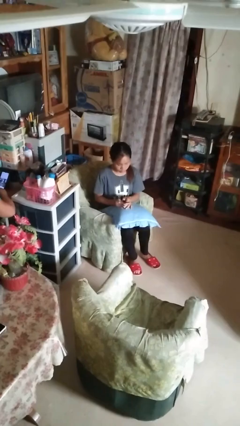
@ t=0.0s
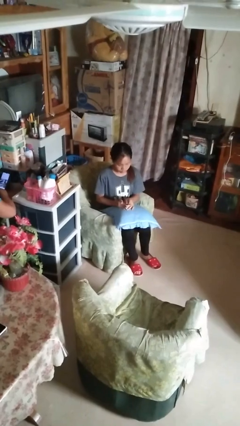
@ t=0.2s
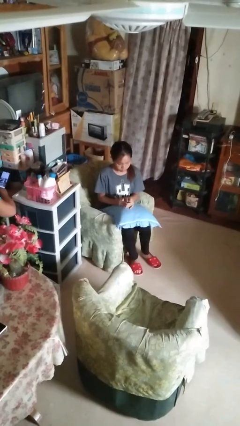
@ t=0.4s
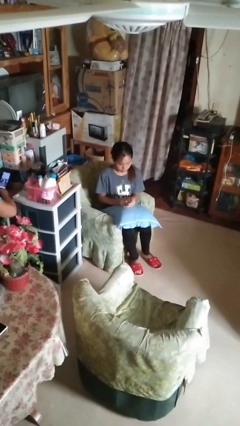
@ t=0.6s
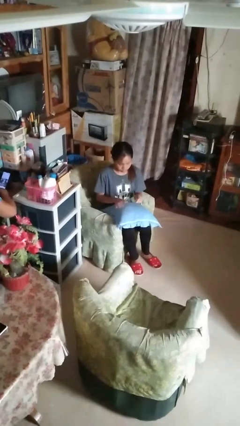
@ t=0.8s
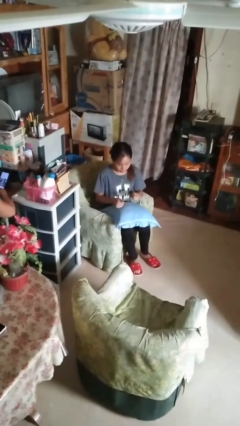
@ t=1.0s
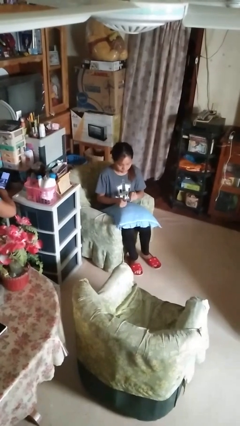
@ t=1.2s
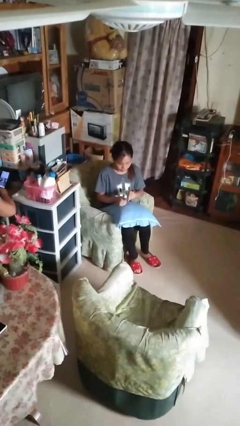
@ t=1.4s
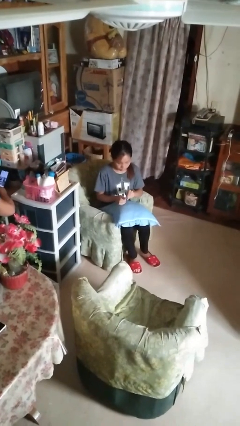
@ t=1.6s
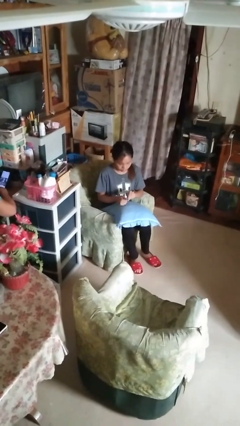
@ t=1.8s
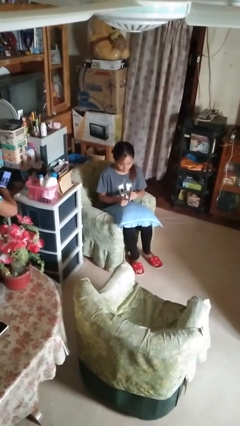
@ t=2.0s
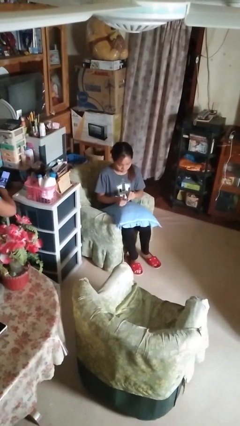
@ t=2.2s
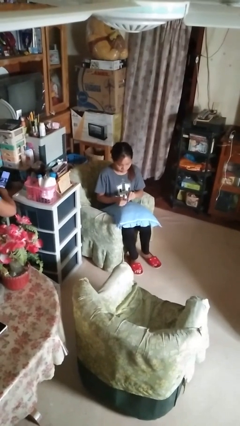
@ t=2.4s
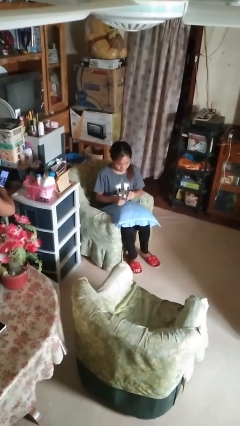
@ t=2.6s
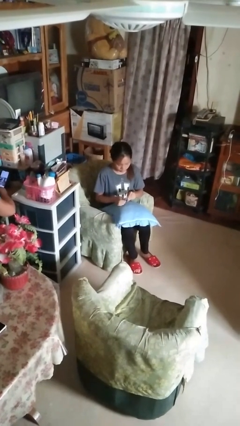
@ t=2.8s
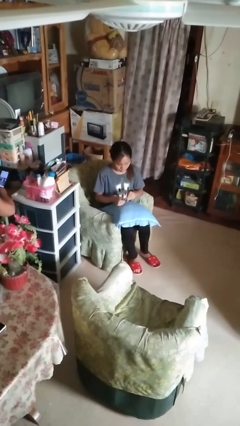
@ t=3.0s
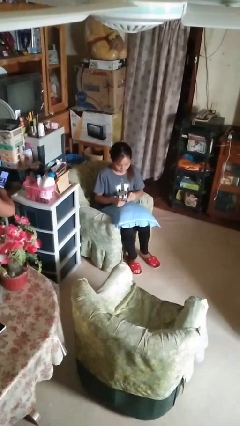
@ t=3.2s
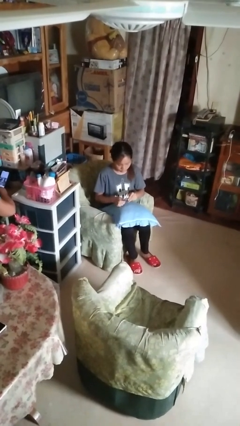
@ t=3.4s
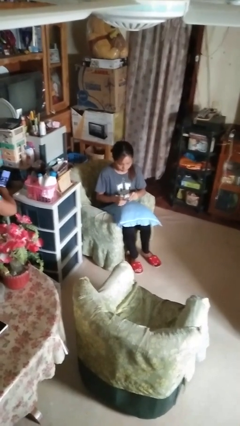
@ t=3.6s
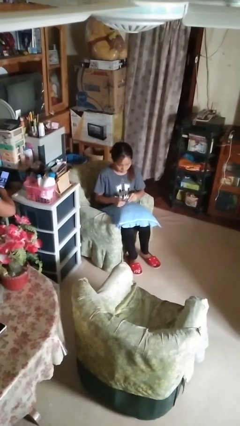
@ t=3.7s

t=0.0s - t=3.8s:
person files fingernails

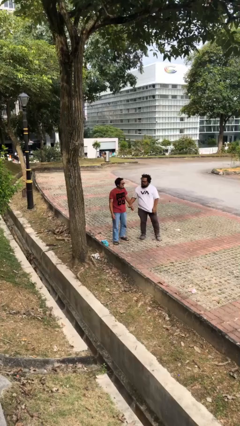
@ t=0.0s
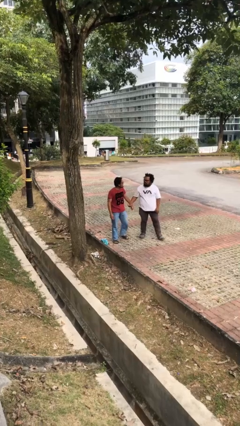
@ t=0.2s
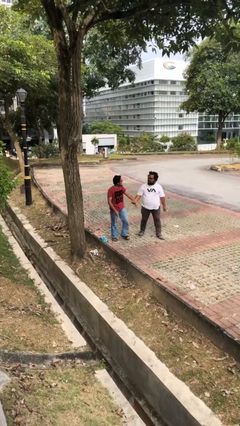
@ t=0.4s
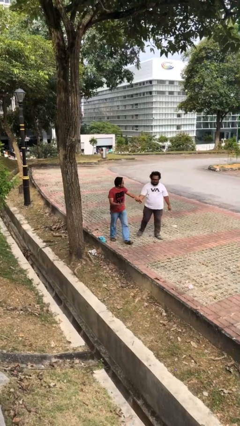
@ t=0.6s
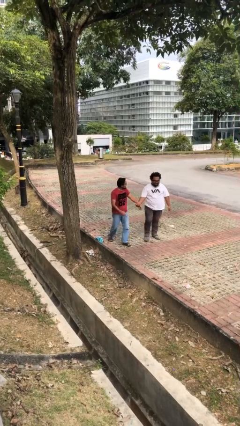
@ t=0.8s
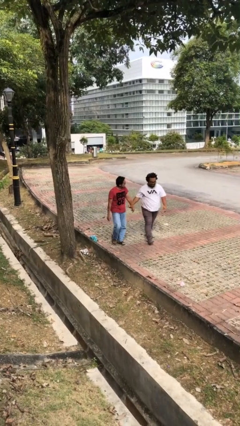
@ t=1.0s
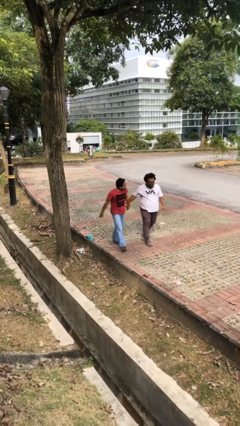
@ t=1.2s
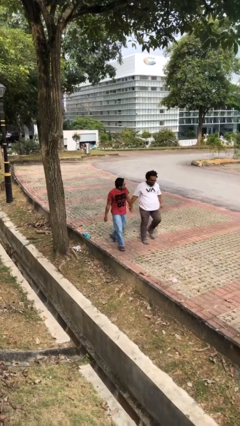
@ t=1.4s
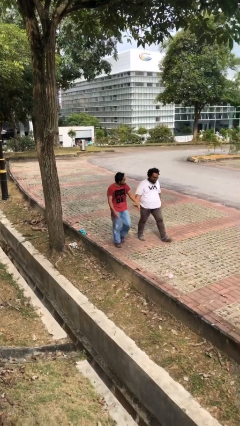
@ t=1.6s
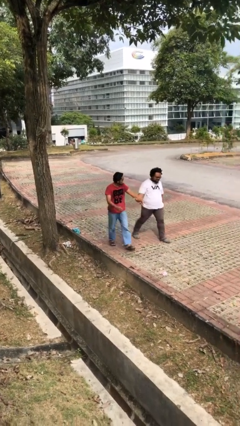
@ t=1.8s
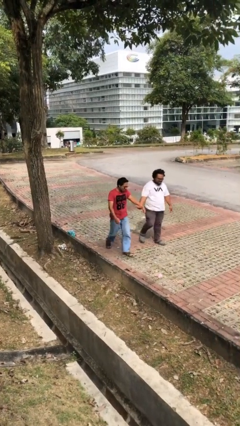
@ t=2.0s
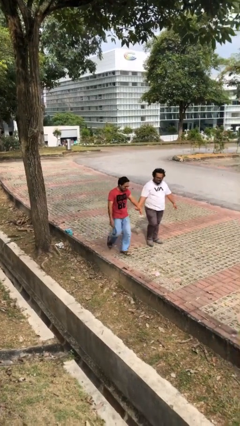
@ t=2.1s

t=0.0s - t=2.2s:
person holds hand

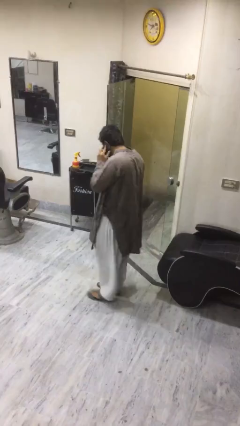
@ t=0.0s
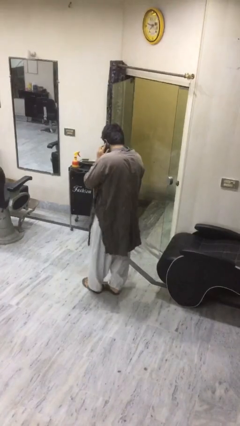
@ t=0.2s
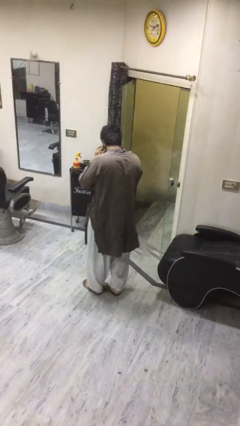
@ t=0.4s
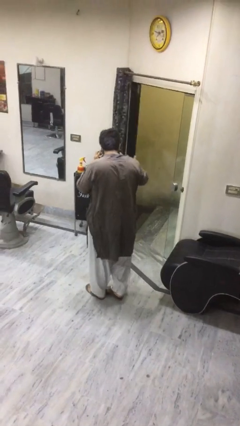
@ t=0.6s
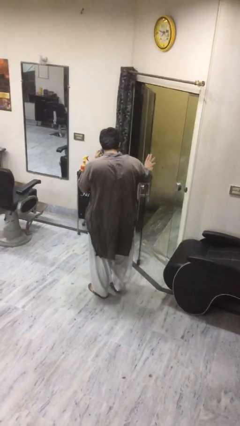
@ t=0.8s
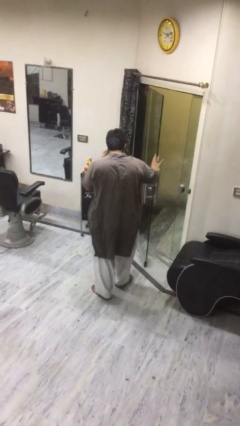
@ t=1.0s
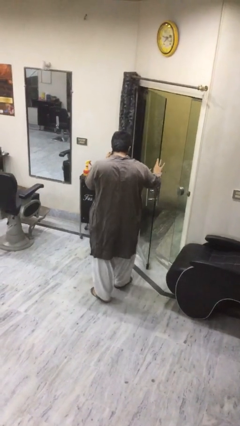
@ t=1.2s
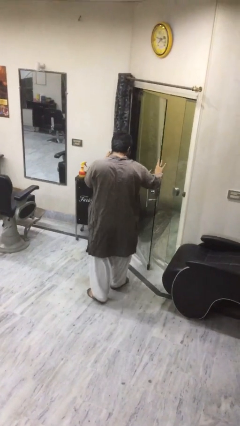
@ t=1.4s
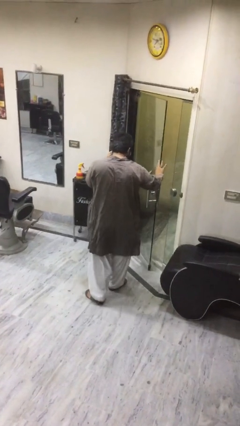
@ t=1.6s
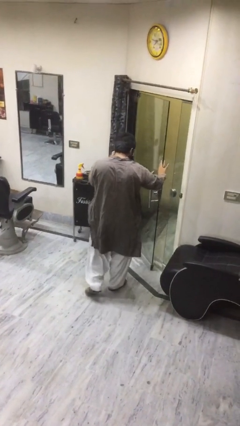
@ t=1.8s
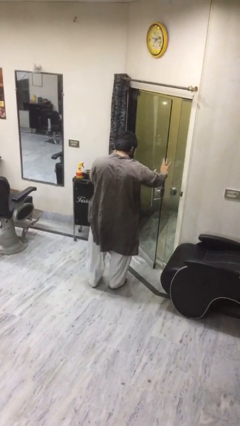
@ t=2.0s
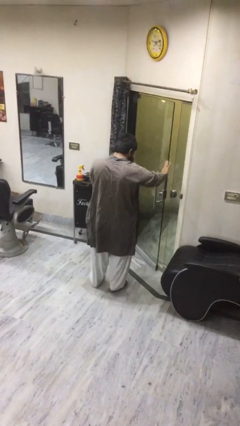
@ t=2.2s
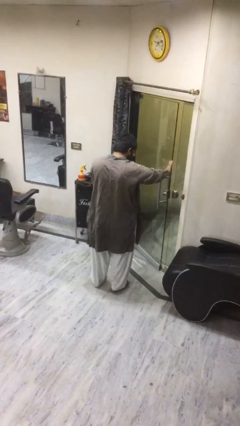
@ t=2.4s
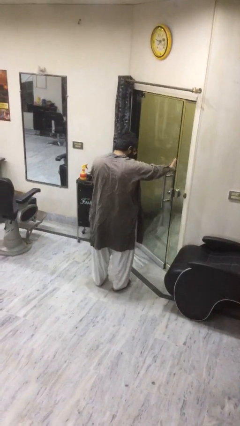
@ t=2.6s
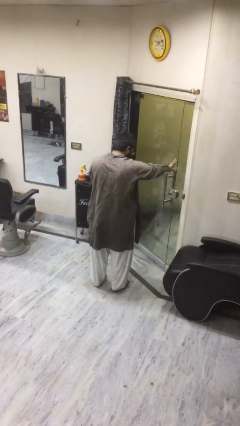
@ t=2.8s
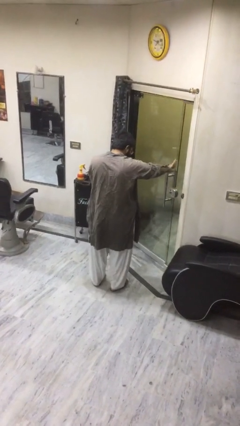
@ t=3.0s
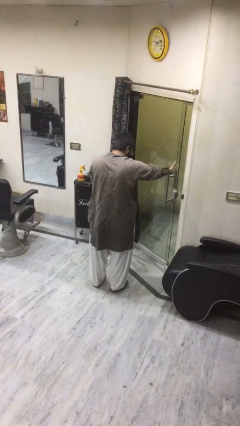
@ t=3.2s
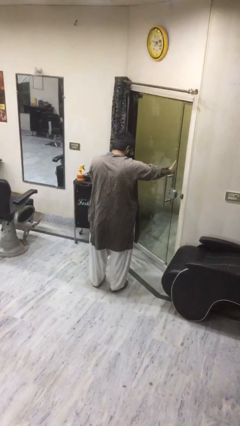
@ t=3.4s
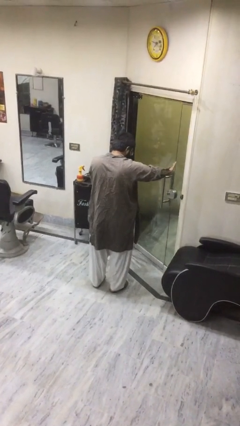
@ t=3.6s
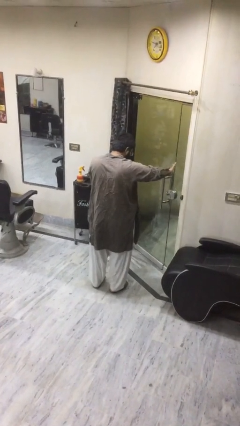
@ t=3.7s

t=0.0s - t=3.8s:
person closes facility door

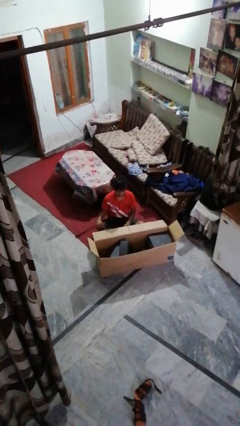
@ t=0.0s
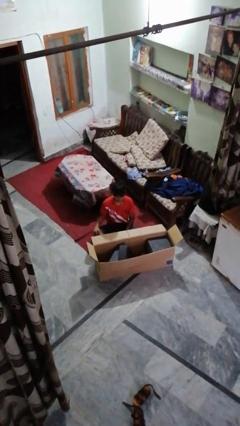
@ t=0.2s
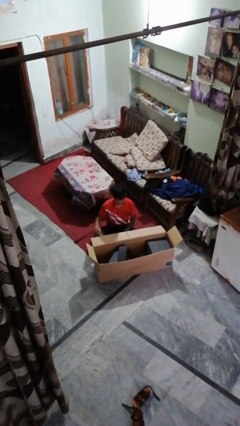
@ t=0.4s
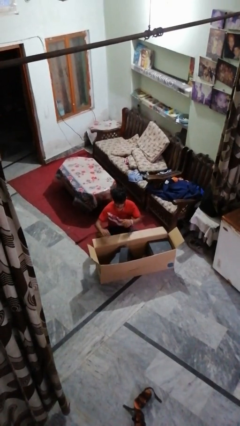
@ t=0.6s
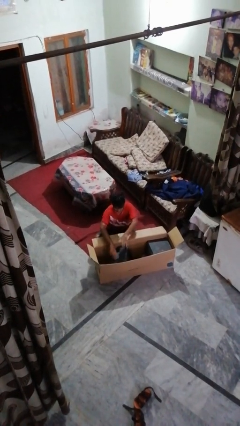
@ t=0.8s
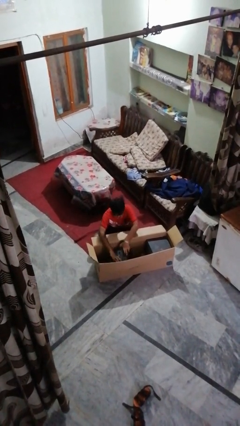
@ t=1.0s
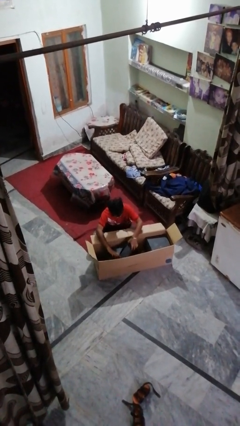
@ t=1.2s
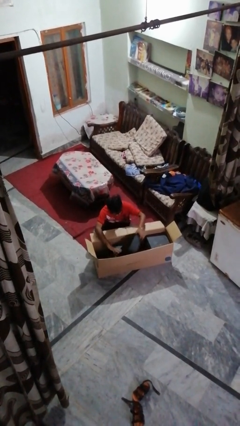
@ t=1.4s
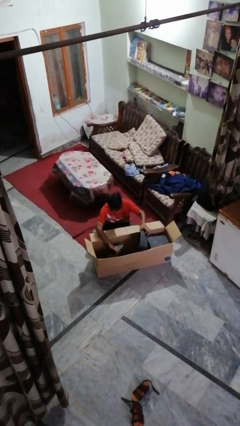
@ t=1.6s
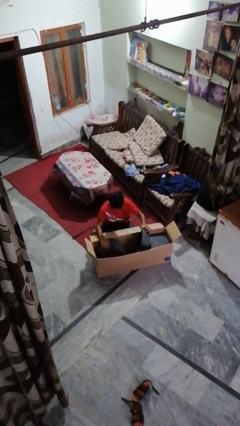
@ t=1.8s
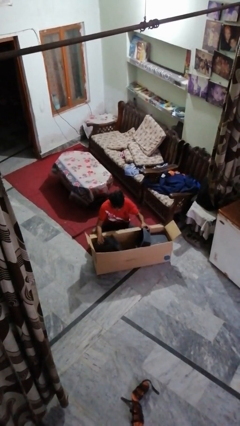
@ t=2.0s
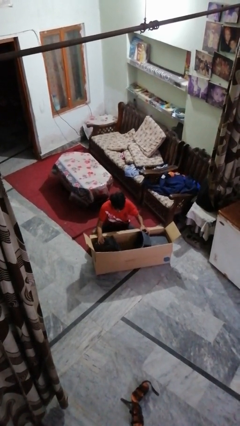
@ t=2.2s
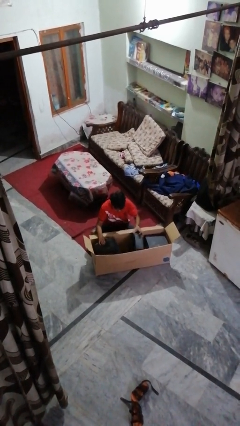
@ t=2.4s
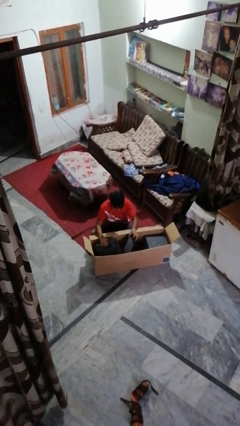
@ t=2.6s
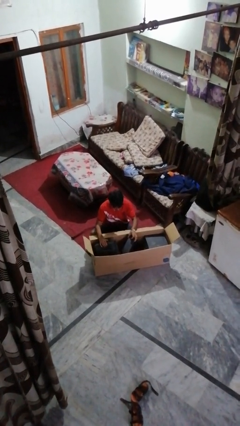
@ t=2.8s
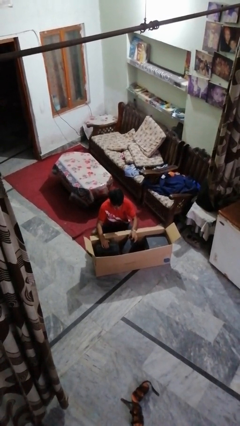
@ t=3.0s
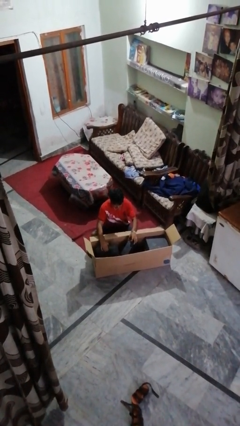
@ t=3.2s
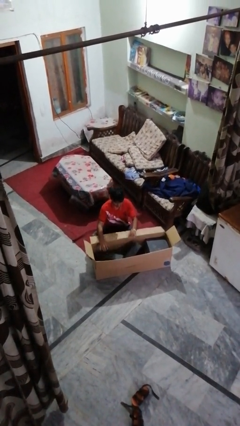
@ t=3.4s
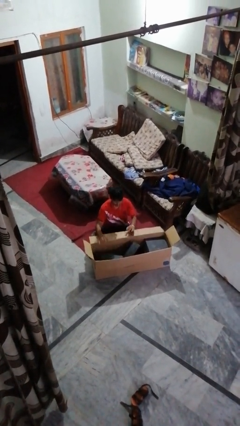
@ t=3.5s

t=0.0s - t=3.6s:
person searches in box

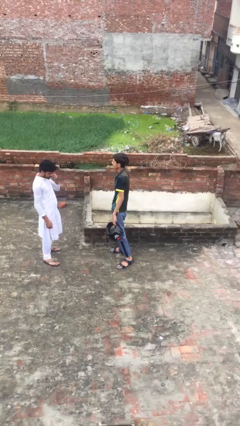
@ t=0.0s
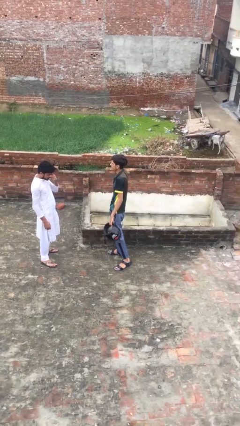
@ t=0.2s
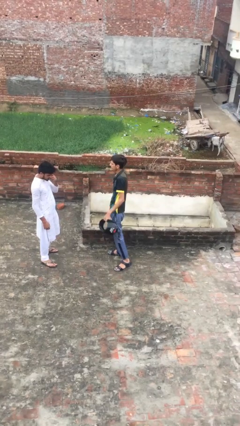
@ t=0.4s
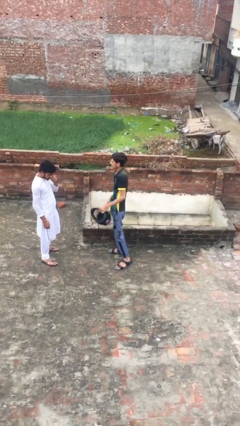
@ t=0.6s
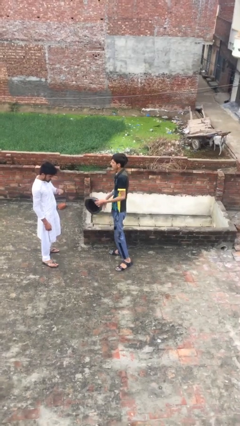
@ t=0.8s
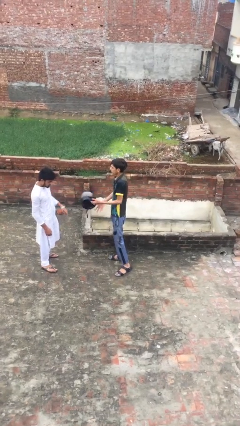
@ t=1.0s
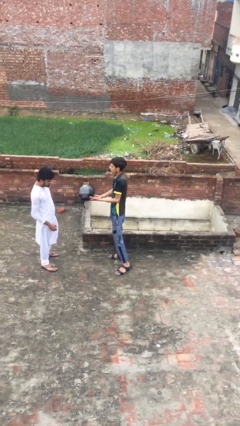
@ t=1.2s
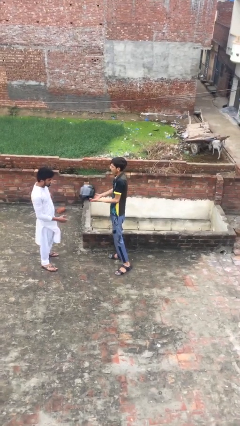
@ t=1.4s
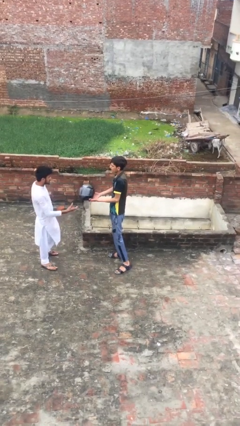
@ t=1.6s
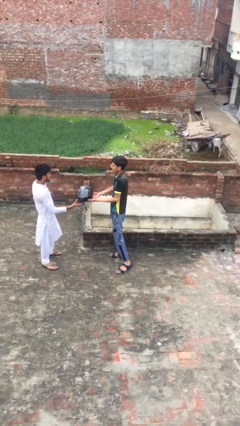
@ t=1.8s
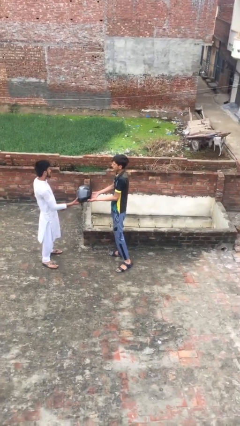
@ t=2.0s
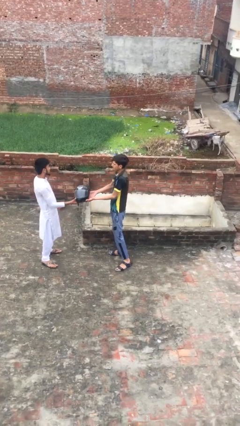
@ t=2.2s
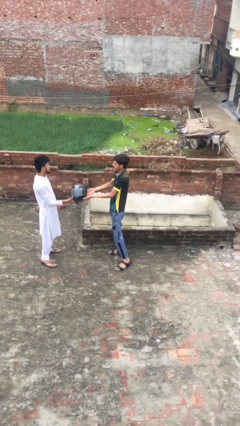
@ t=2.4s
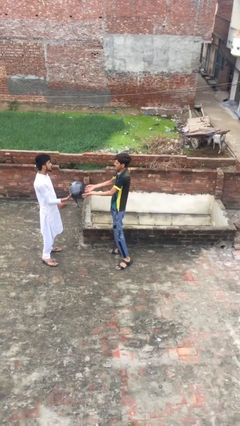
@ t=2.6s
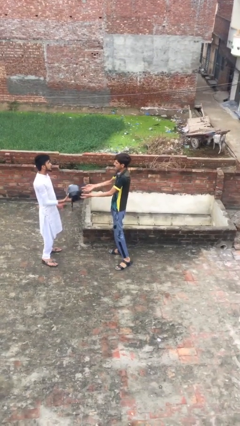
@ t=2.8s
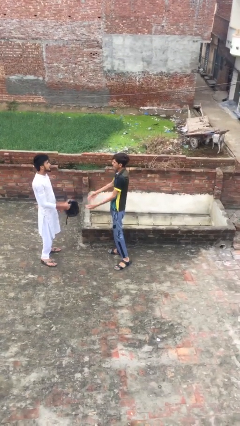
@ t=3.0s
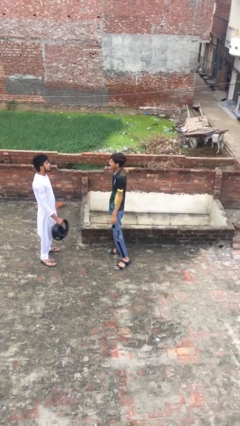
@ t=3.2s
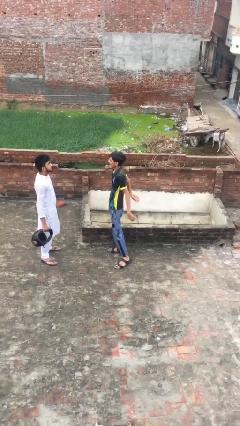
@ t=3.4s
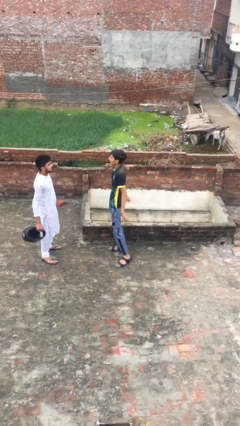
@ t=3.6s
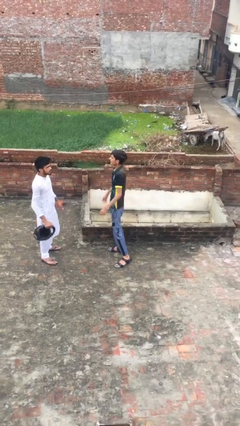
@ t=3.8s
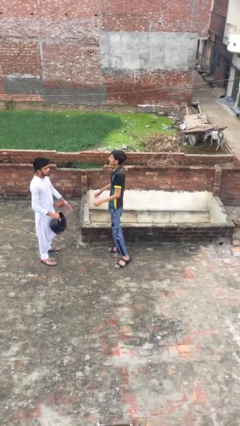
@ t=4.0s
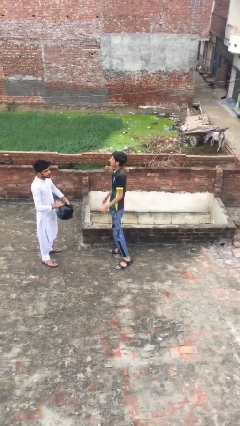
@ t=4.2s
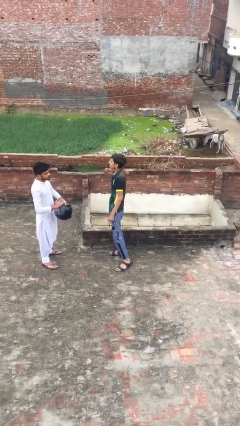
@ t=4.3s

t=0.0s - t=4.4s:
person transfers object to person

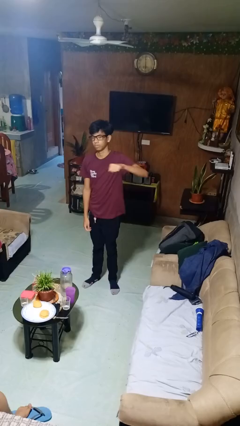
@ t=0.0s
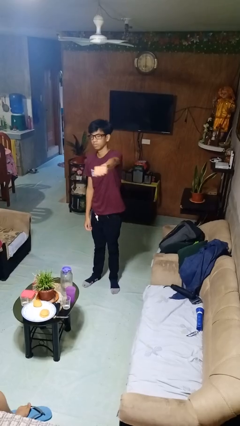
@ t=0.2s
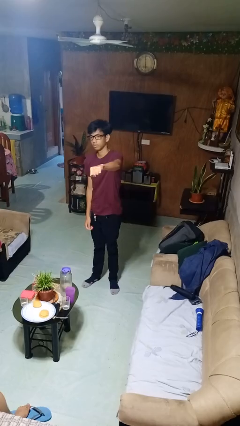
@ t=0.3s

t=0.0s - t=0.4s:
person punches
